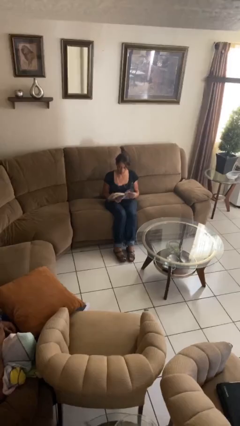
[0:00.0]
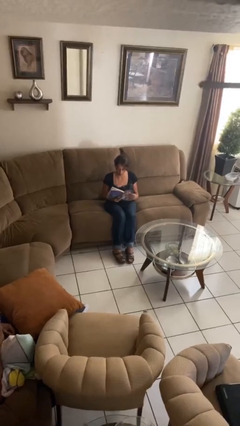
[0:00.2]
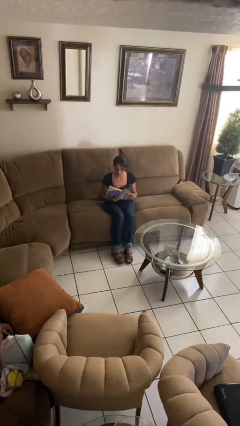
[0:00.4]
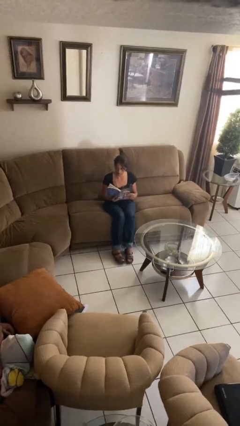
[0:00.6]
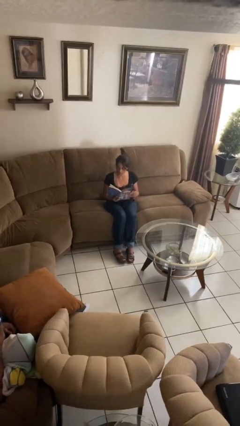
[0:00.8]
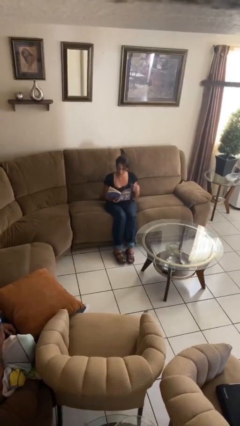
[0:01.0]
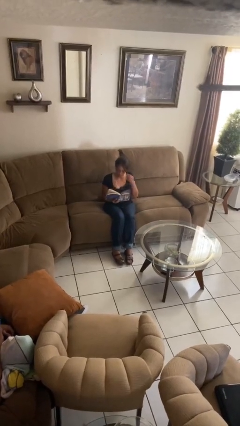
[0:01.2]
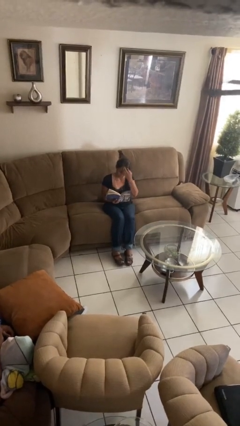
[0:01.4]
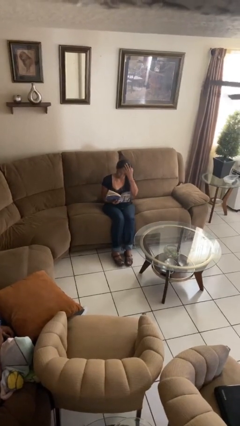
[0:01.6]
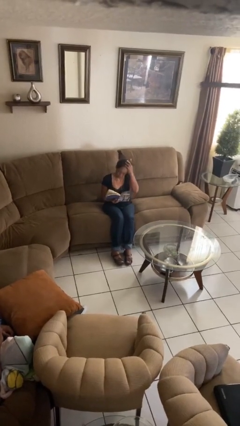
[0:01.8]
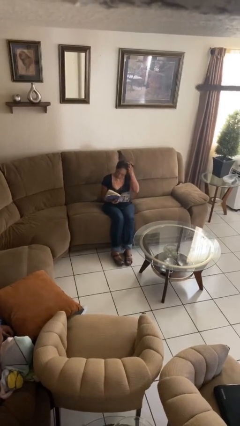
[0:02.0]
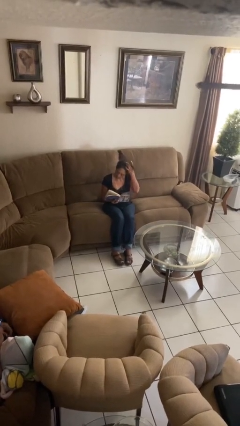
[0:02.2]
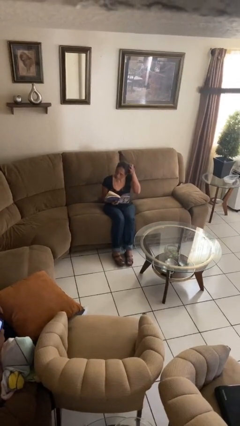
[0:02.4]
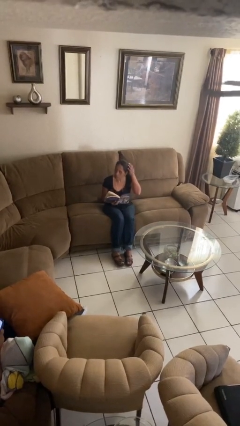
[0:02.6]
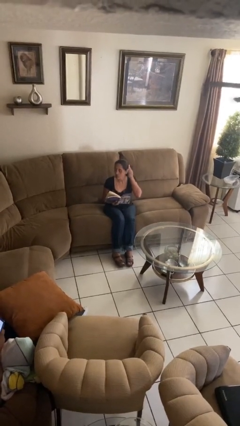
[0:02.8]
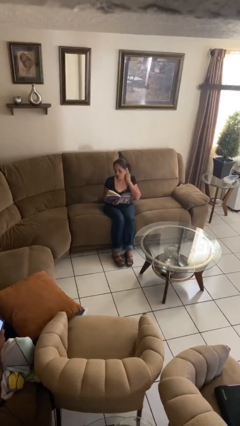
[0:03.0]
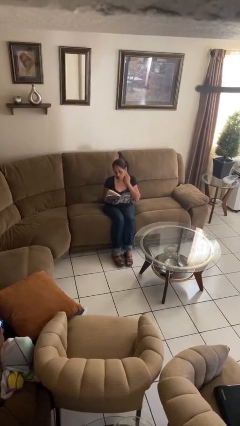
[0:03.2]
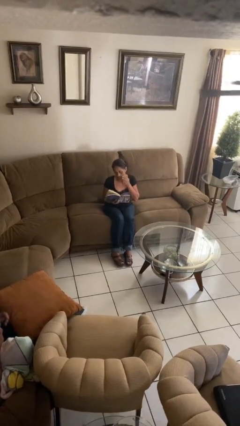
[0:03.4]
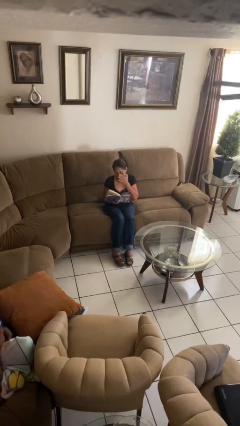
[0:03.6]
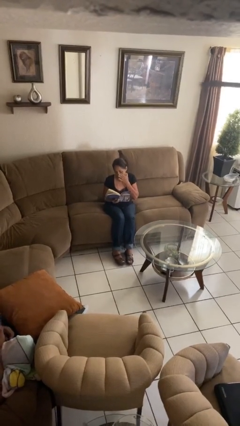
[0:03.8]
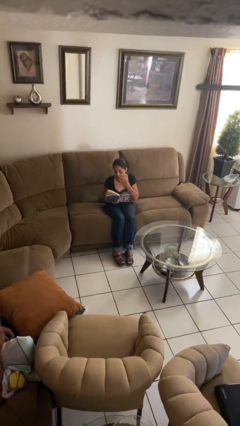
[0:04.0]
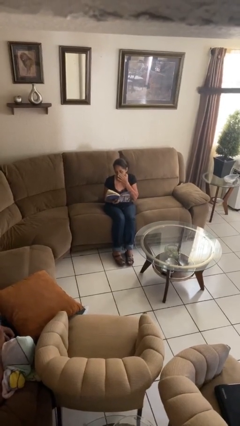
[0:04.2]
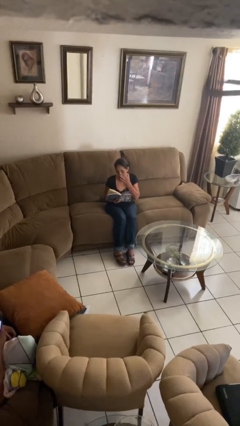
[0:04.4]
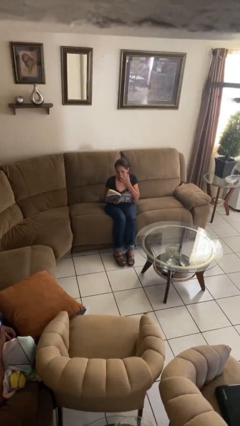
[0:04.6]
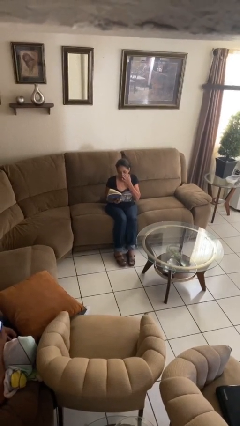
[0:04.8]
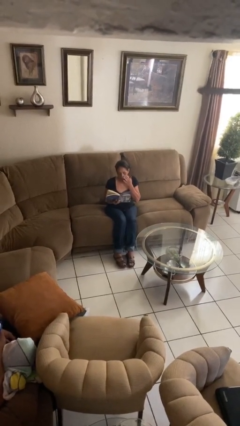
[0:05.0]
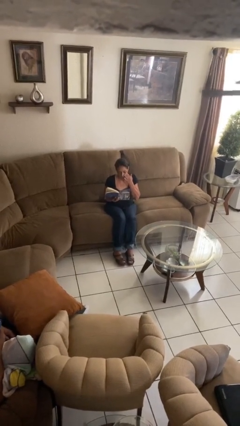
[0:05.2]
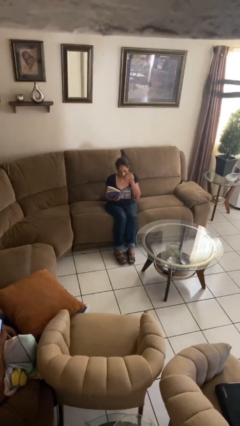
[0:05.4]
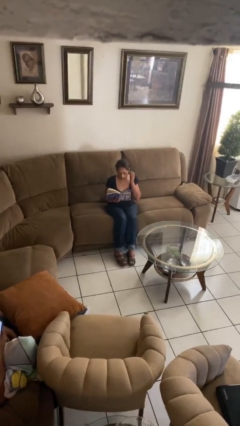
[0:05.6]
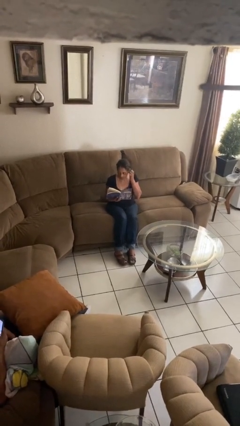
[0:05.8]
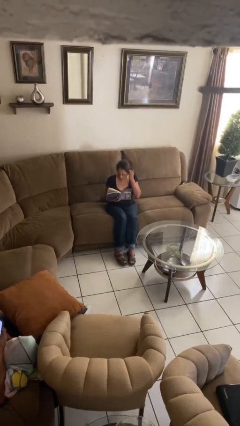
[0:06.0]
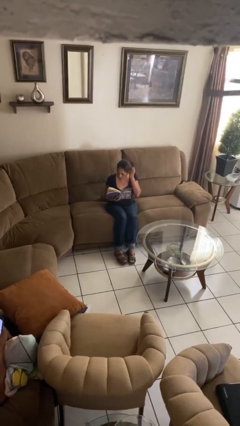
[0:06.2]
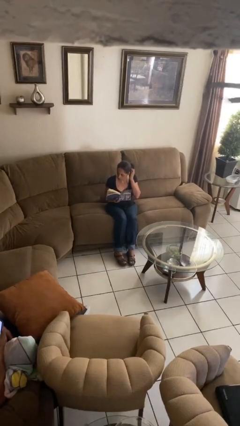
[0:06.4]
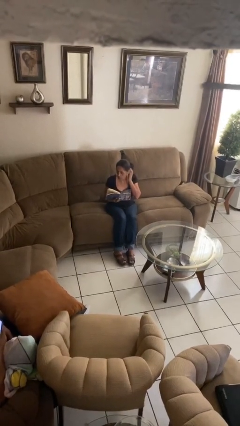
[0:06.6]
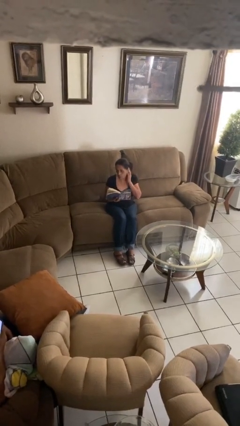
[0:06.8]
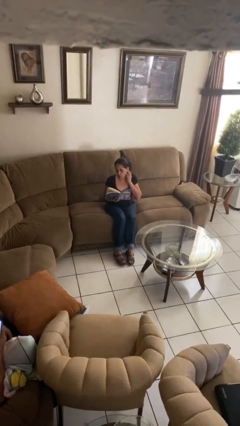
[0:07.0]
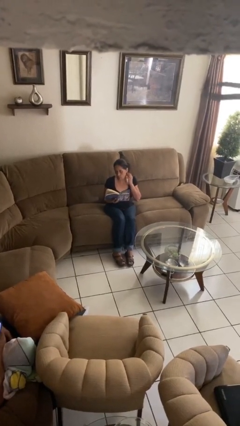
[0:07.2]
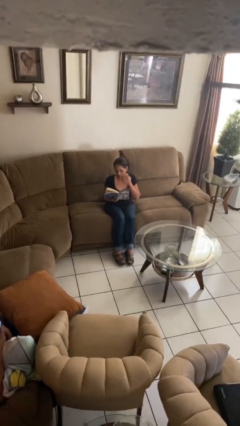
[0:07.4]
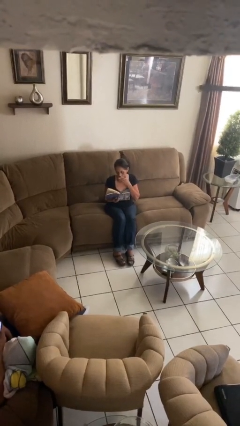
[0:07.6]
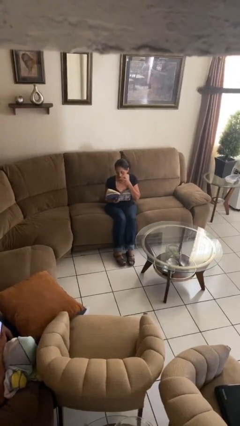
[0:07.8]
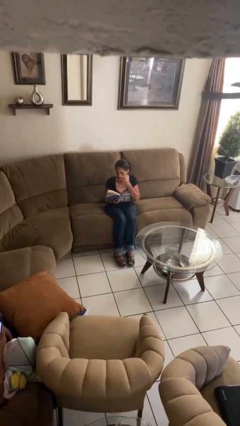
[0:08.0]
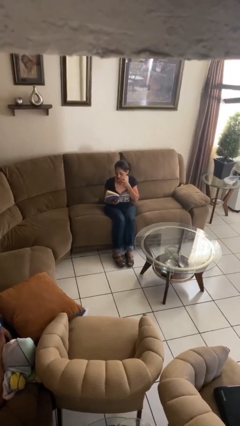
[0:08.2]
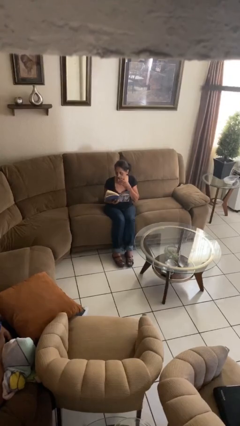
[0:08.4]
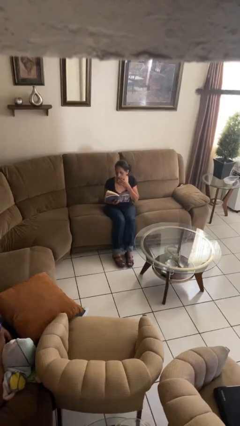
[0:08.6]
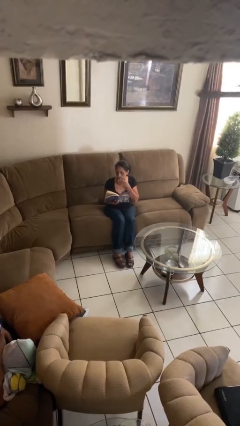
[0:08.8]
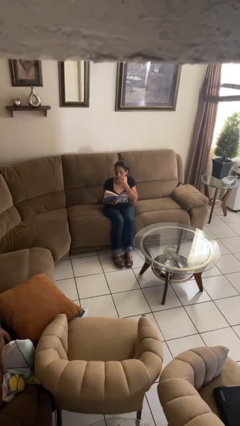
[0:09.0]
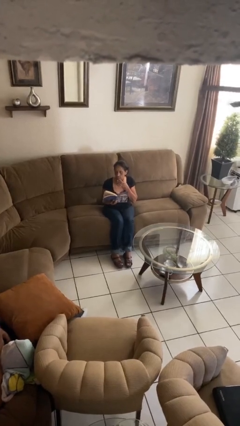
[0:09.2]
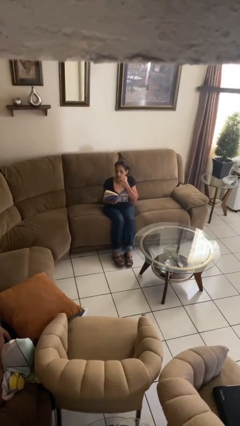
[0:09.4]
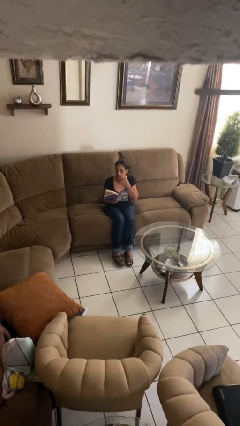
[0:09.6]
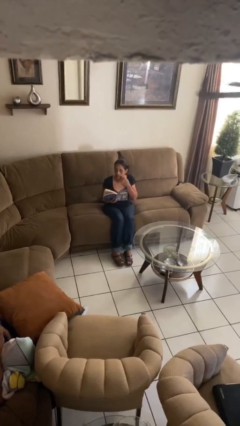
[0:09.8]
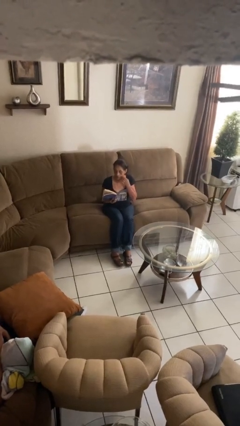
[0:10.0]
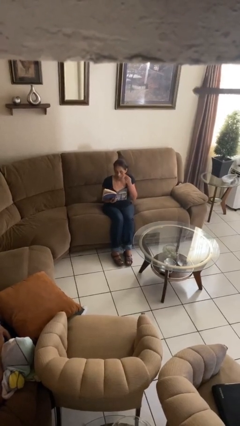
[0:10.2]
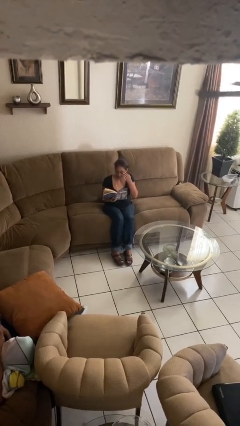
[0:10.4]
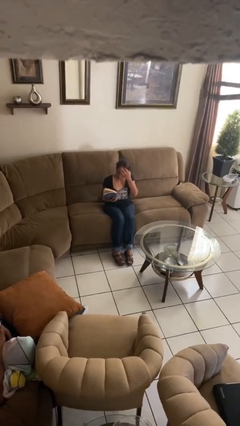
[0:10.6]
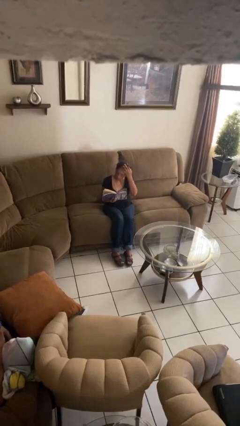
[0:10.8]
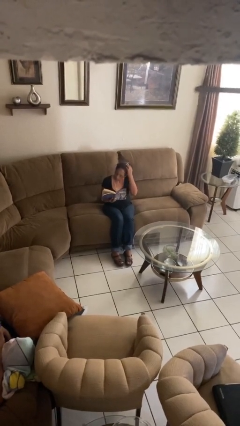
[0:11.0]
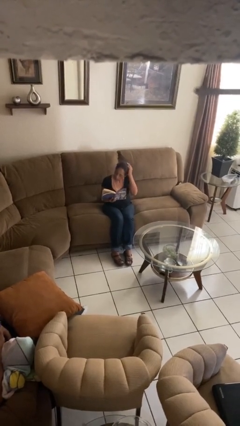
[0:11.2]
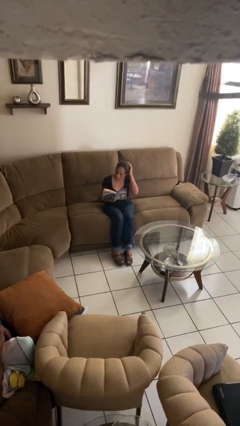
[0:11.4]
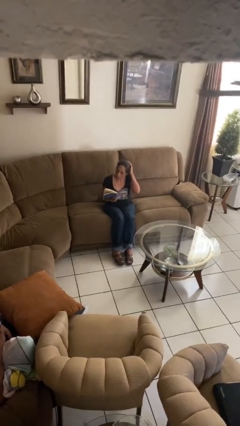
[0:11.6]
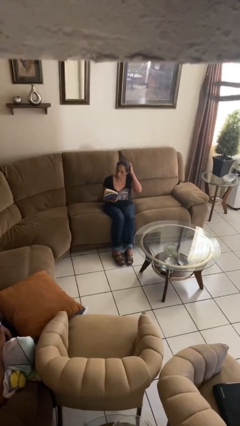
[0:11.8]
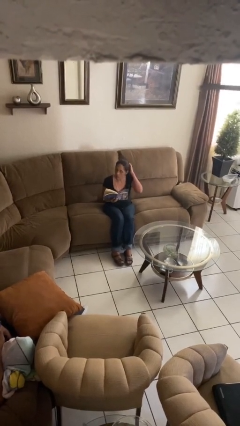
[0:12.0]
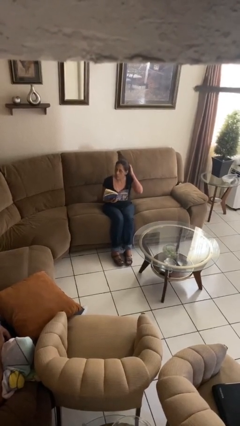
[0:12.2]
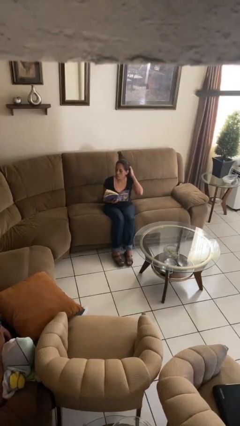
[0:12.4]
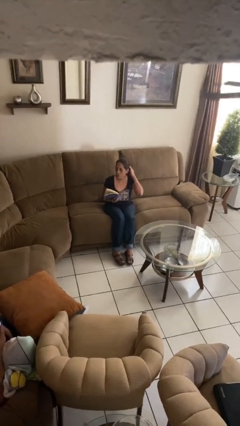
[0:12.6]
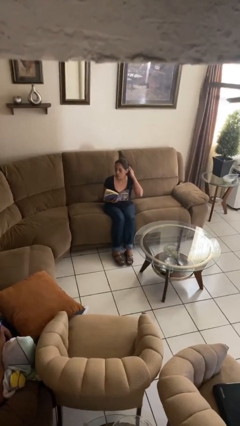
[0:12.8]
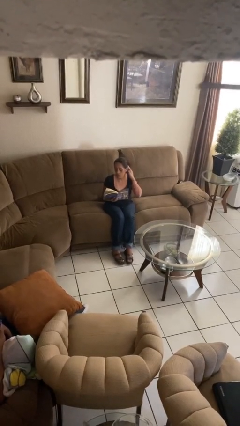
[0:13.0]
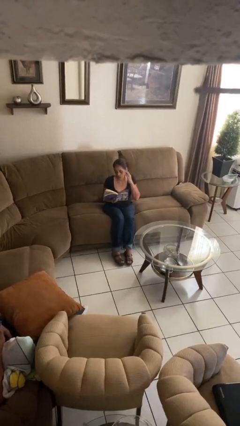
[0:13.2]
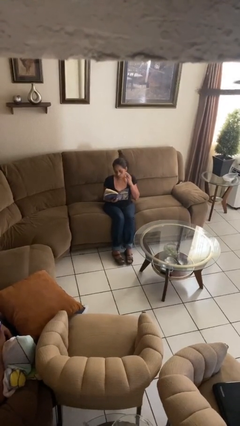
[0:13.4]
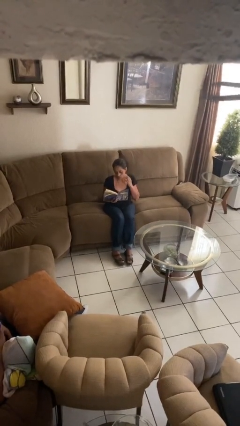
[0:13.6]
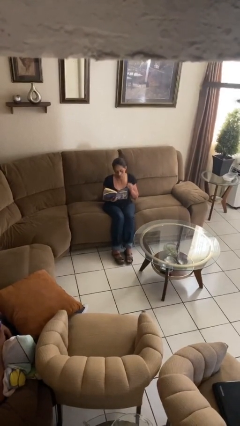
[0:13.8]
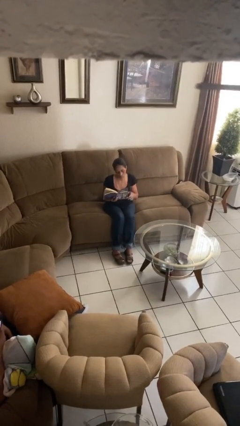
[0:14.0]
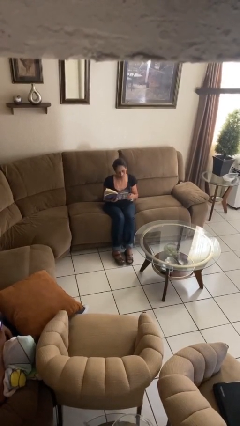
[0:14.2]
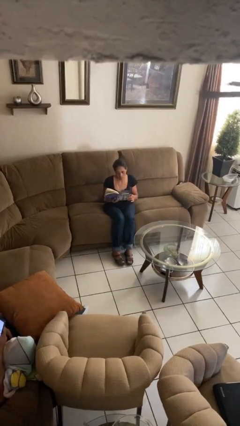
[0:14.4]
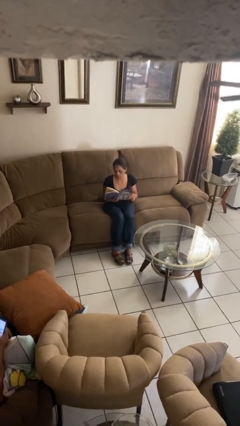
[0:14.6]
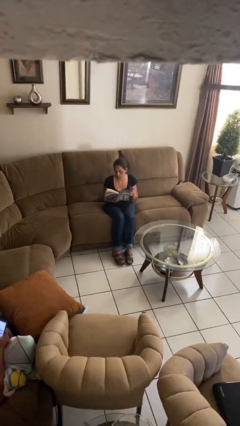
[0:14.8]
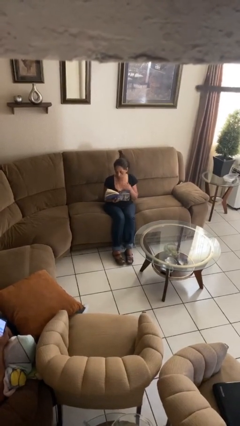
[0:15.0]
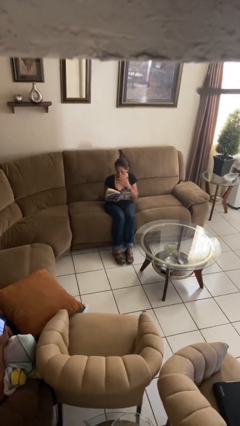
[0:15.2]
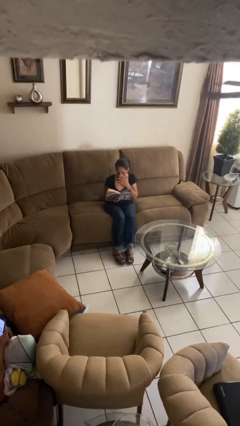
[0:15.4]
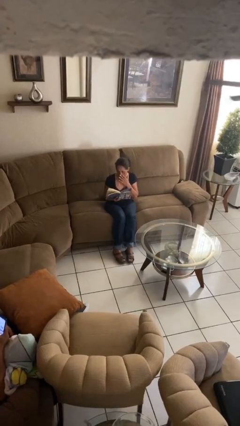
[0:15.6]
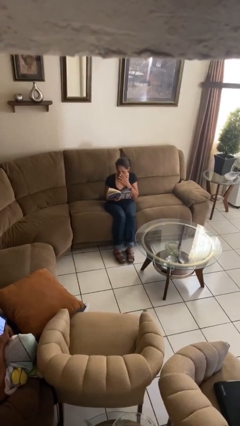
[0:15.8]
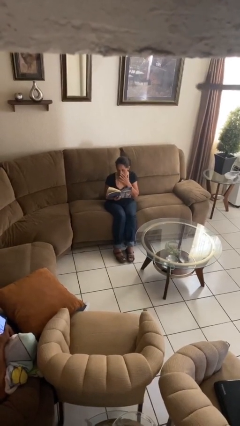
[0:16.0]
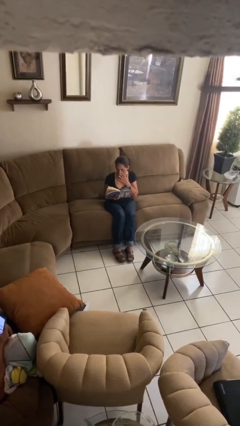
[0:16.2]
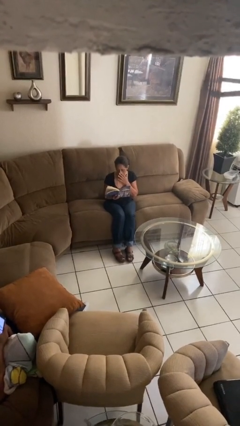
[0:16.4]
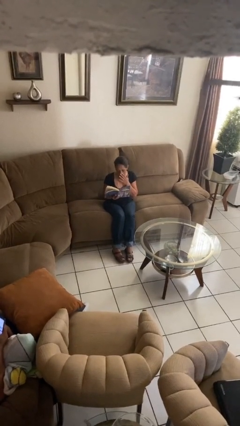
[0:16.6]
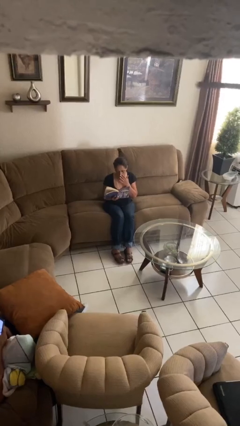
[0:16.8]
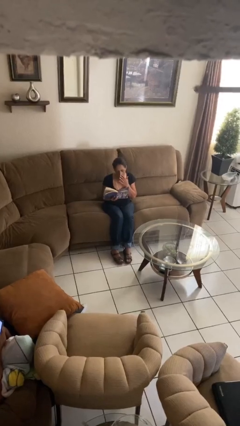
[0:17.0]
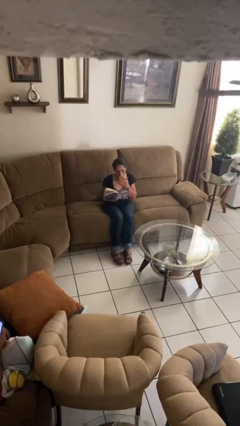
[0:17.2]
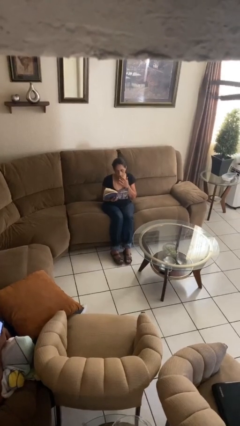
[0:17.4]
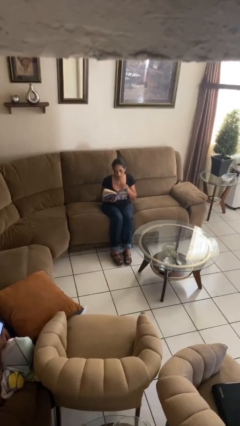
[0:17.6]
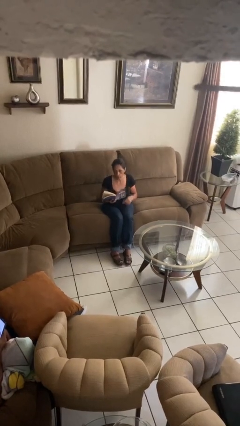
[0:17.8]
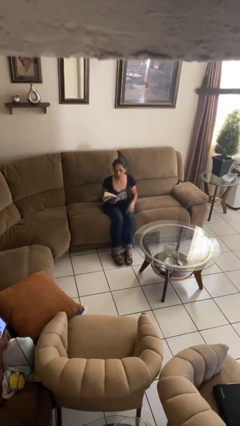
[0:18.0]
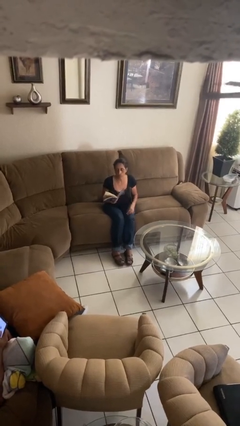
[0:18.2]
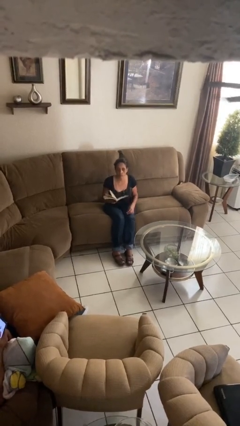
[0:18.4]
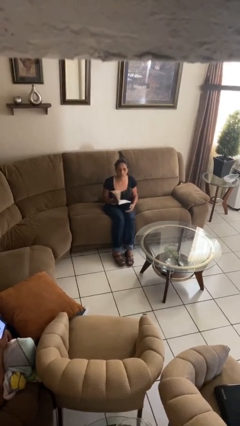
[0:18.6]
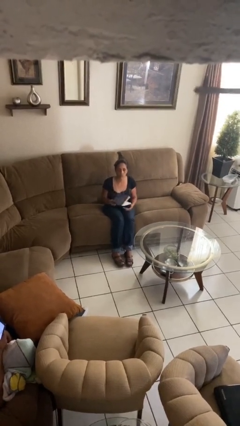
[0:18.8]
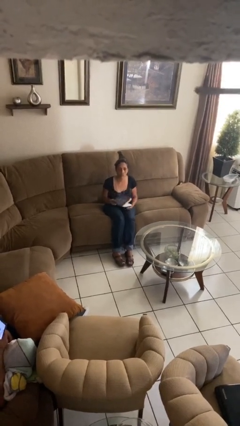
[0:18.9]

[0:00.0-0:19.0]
person reads document
